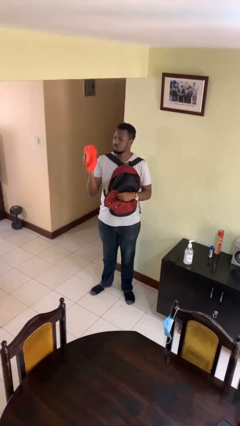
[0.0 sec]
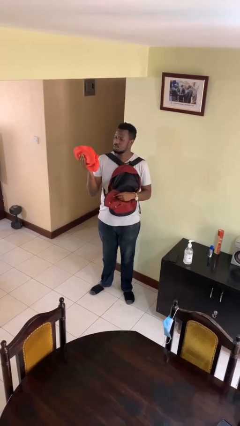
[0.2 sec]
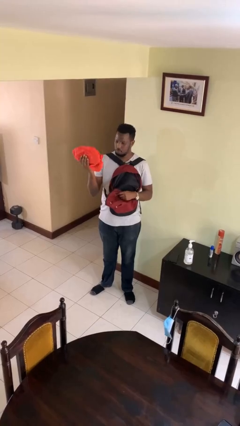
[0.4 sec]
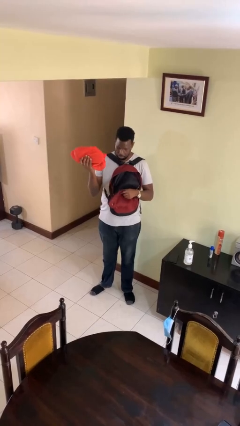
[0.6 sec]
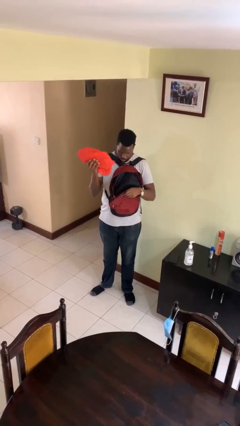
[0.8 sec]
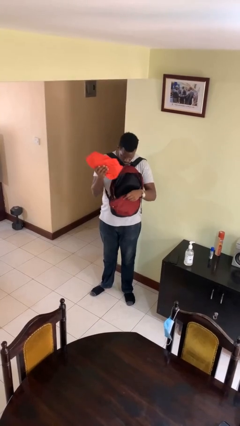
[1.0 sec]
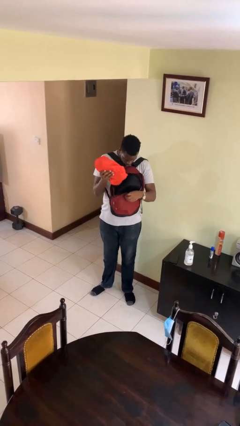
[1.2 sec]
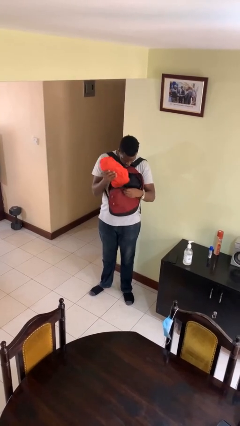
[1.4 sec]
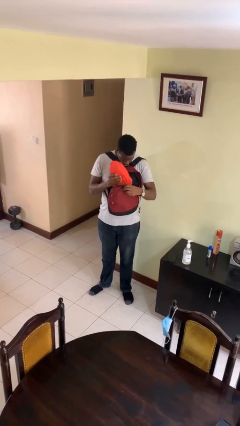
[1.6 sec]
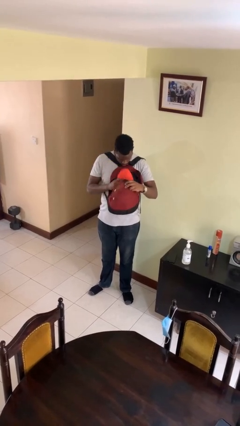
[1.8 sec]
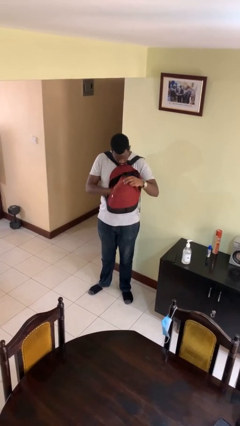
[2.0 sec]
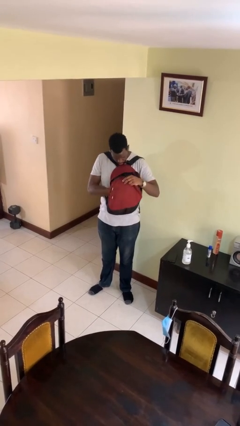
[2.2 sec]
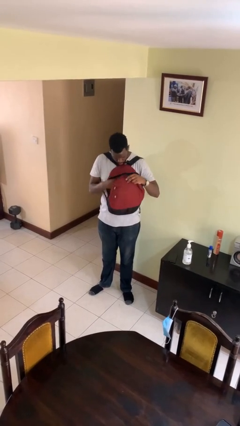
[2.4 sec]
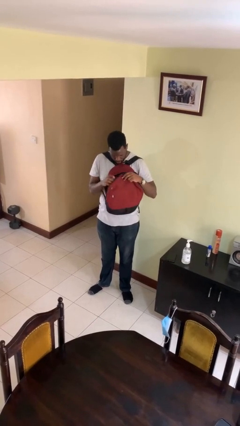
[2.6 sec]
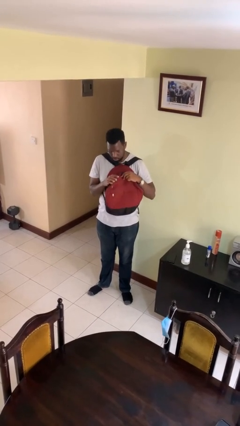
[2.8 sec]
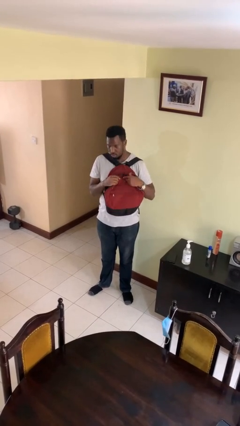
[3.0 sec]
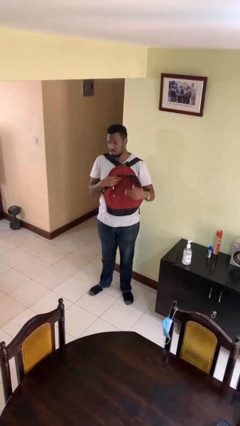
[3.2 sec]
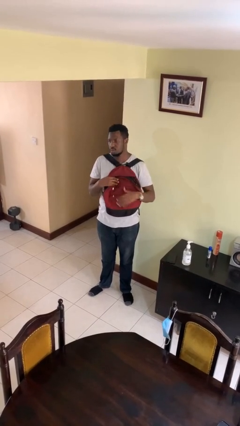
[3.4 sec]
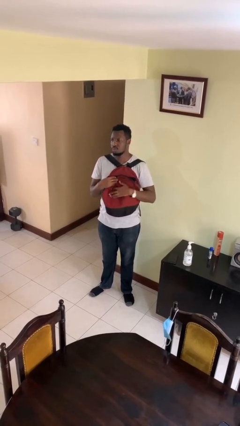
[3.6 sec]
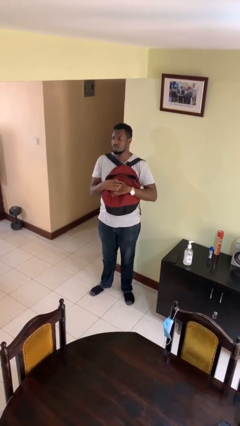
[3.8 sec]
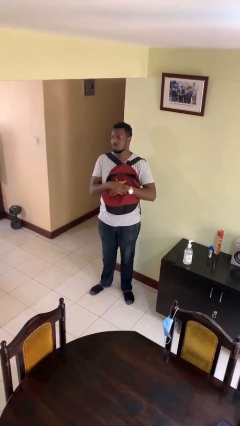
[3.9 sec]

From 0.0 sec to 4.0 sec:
person puts object into backpack

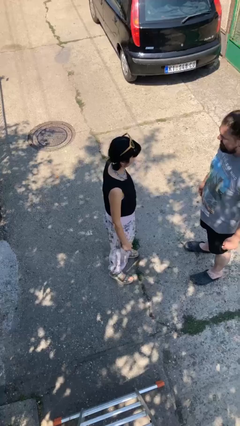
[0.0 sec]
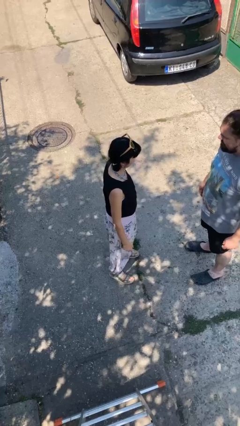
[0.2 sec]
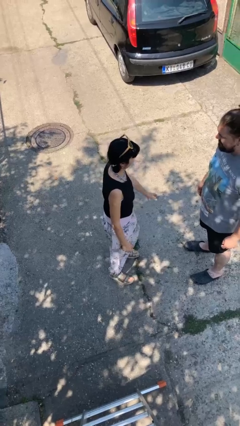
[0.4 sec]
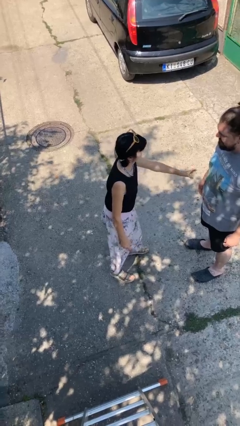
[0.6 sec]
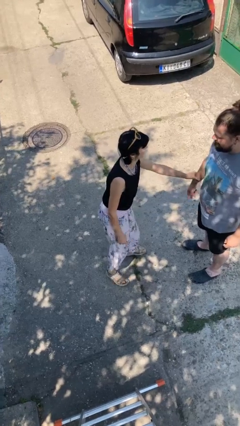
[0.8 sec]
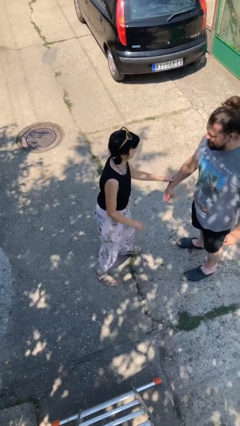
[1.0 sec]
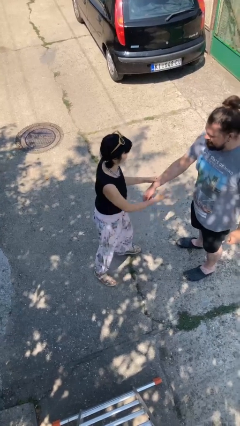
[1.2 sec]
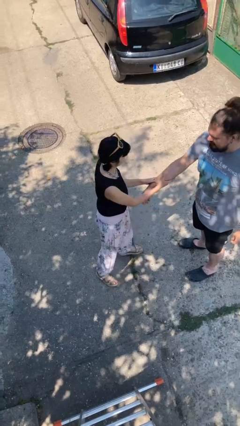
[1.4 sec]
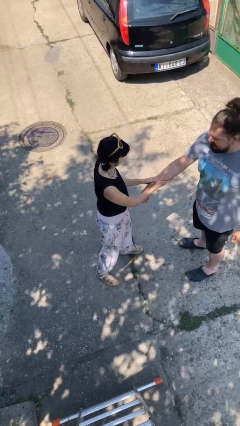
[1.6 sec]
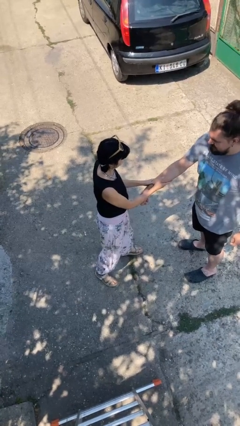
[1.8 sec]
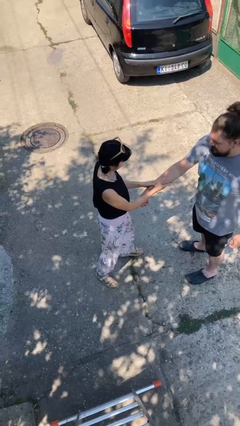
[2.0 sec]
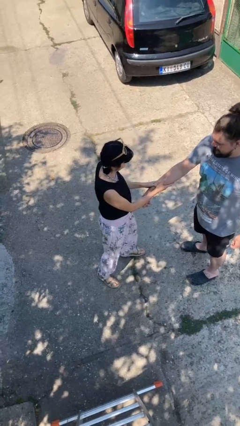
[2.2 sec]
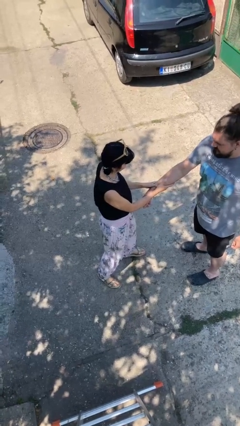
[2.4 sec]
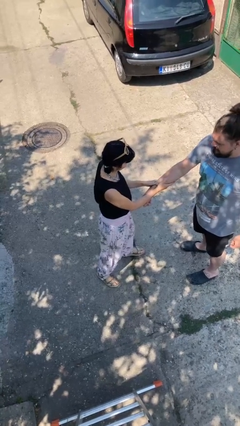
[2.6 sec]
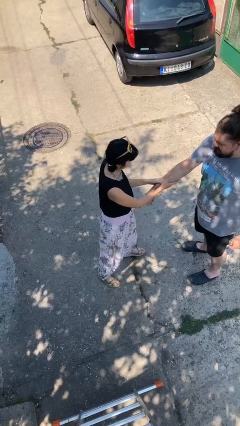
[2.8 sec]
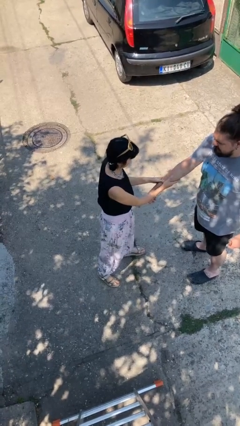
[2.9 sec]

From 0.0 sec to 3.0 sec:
person grabs person by forearm

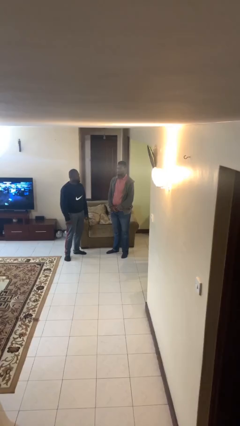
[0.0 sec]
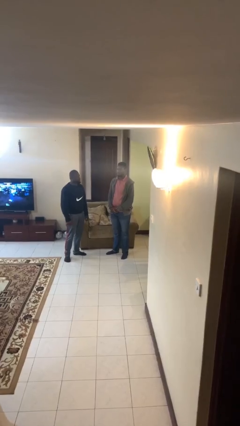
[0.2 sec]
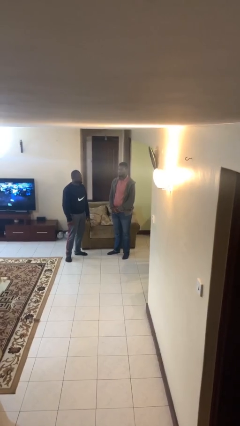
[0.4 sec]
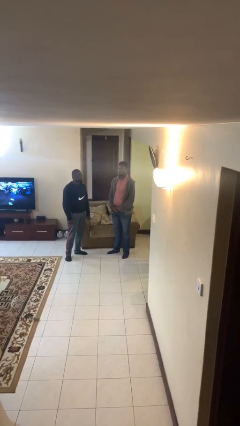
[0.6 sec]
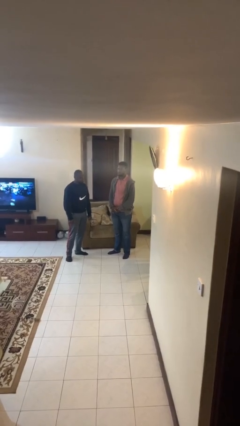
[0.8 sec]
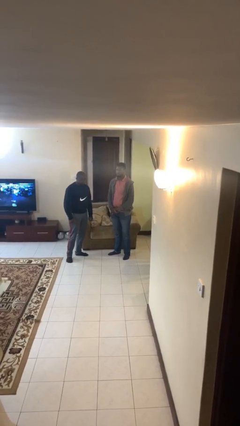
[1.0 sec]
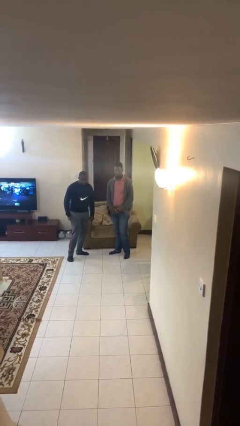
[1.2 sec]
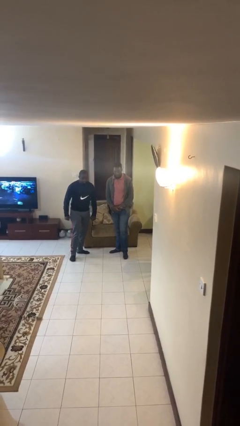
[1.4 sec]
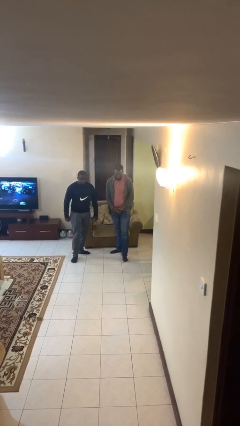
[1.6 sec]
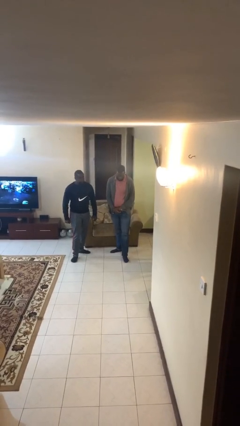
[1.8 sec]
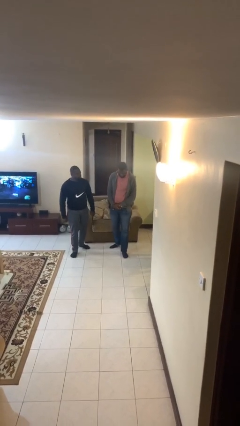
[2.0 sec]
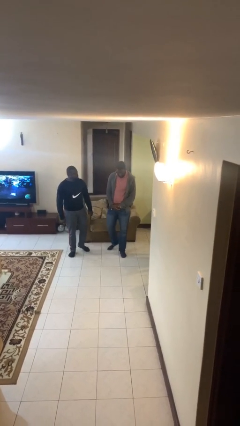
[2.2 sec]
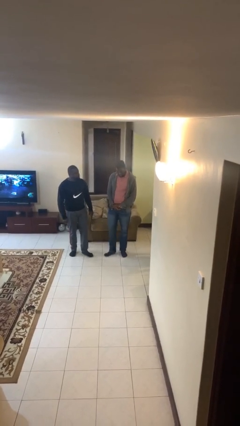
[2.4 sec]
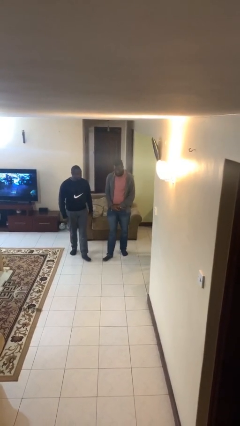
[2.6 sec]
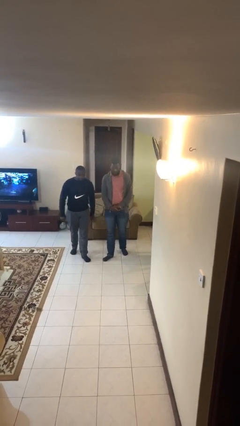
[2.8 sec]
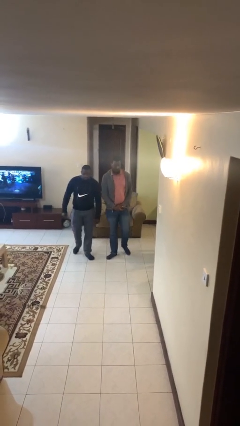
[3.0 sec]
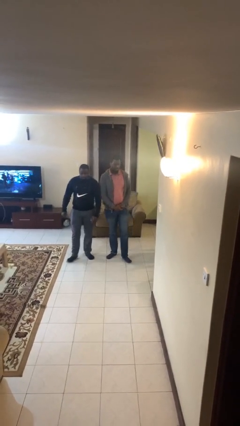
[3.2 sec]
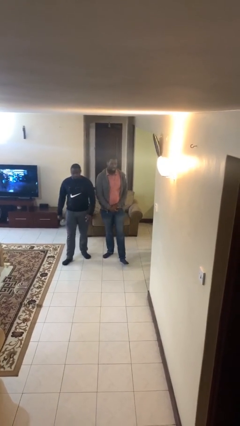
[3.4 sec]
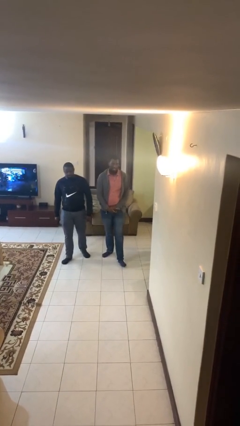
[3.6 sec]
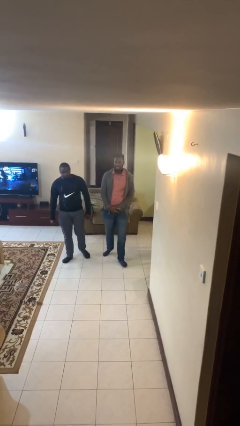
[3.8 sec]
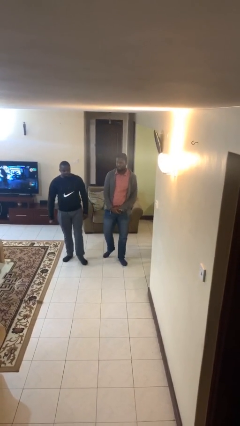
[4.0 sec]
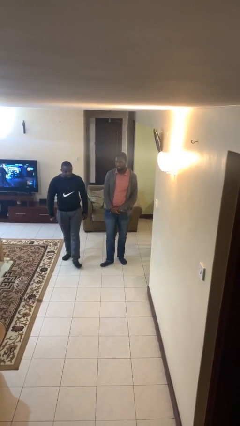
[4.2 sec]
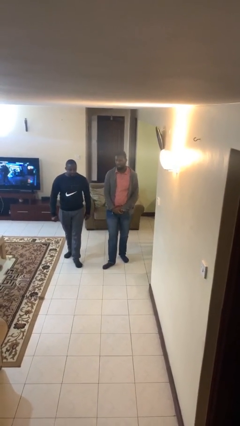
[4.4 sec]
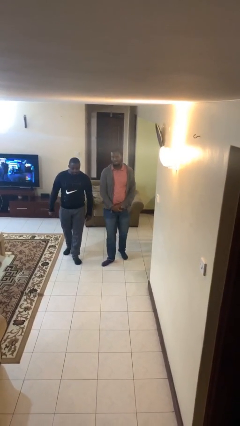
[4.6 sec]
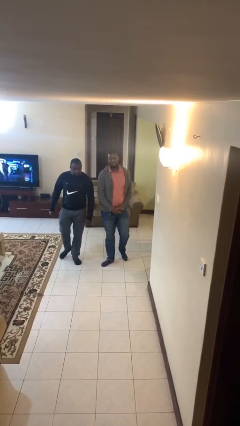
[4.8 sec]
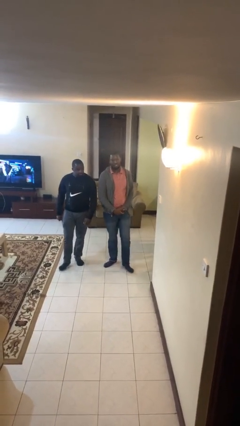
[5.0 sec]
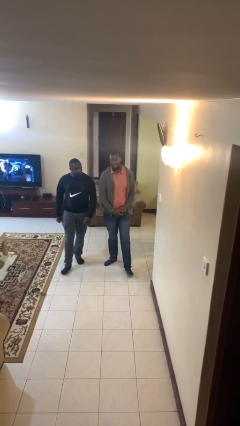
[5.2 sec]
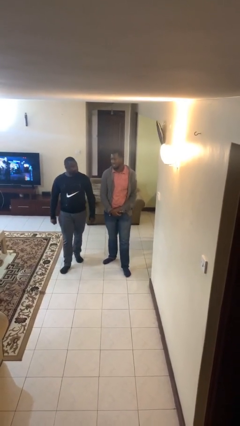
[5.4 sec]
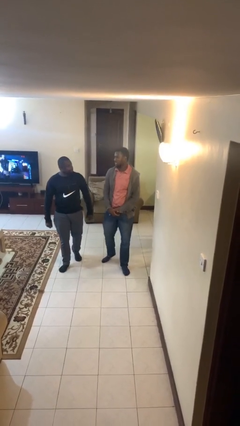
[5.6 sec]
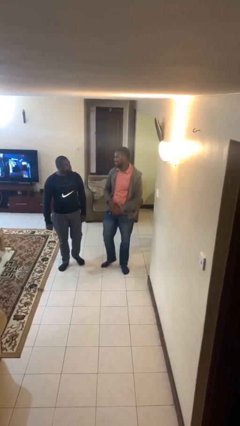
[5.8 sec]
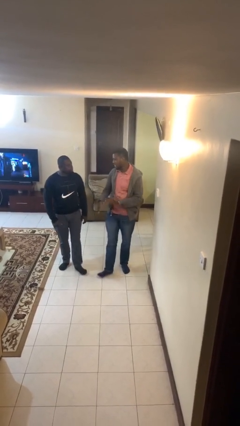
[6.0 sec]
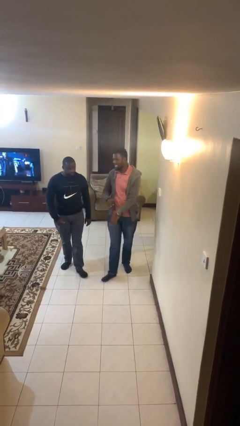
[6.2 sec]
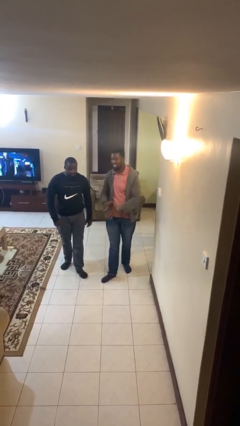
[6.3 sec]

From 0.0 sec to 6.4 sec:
person talks to person

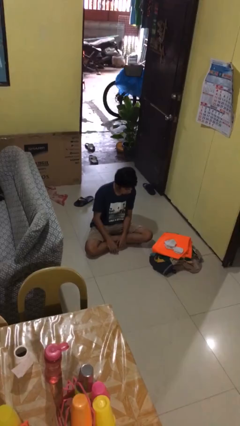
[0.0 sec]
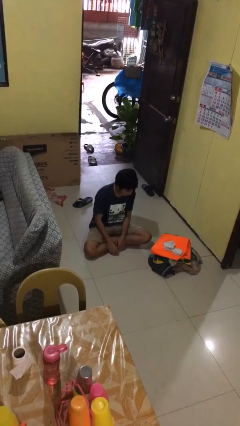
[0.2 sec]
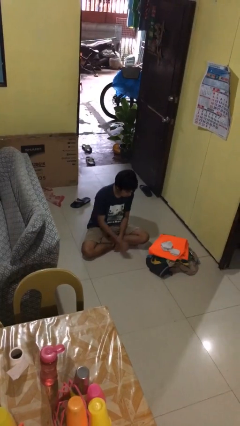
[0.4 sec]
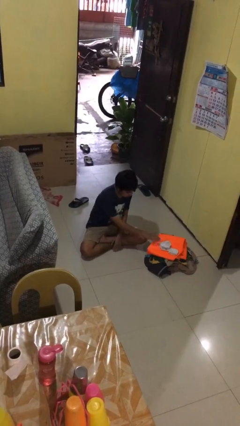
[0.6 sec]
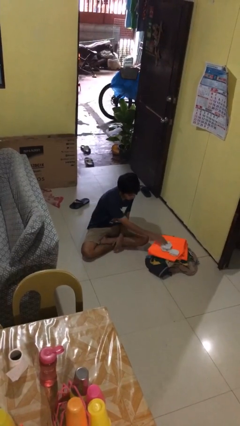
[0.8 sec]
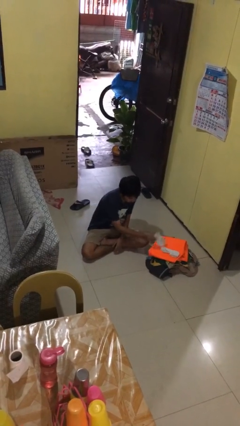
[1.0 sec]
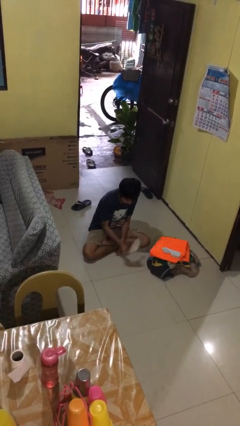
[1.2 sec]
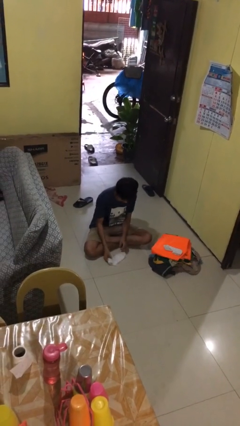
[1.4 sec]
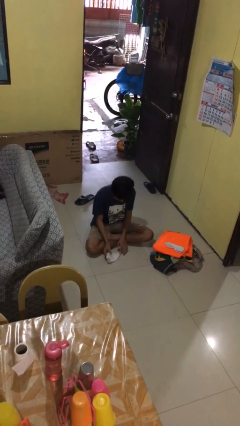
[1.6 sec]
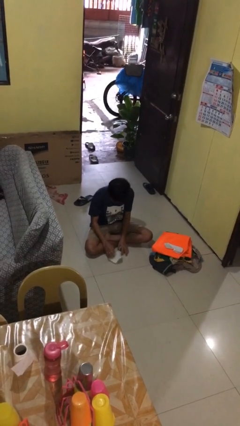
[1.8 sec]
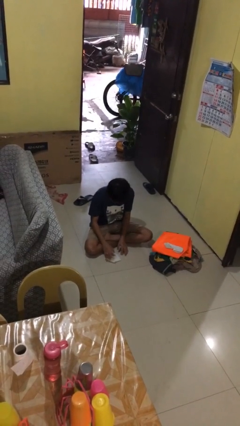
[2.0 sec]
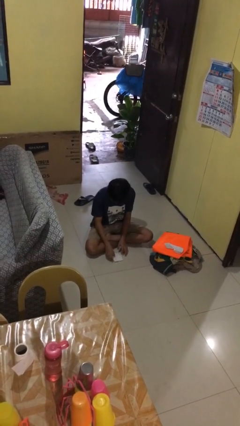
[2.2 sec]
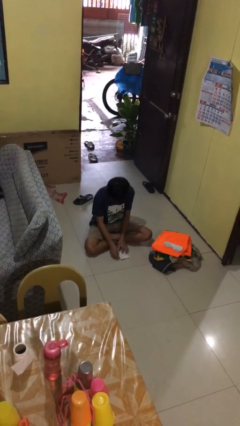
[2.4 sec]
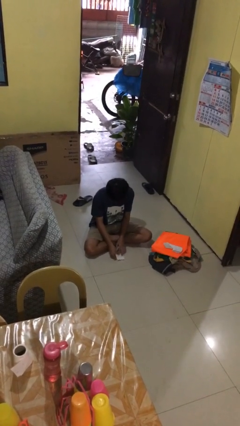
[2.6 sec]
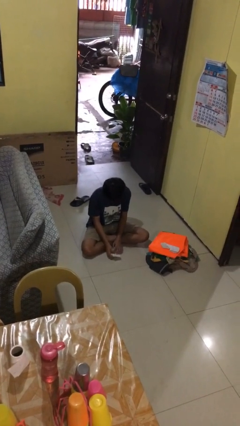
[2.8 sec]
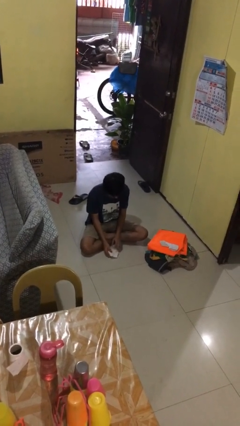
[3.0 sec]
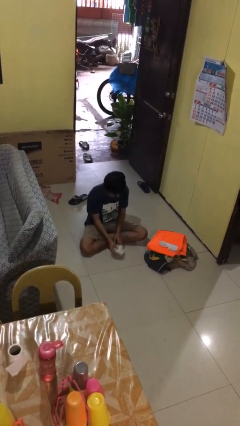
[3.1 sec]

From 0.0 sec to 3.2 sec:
person folds socks

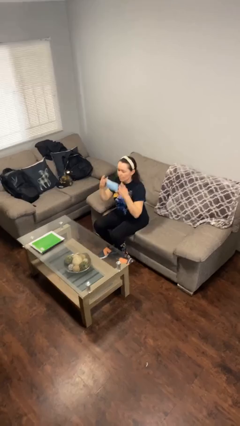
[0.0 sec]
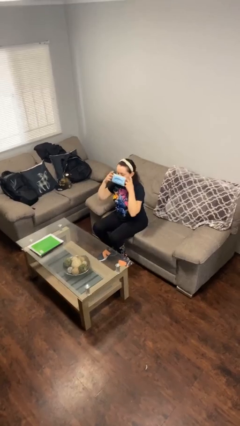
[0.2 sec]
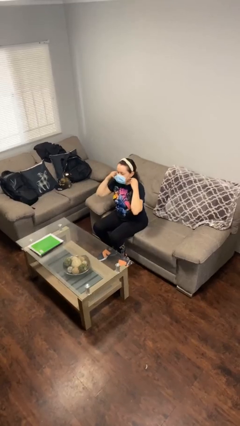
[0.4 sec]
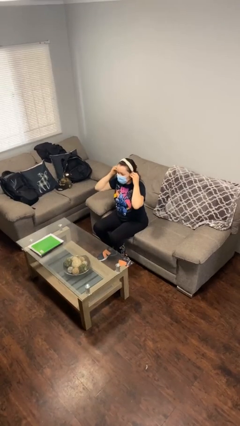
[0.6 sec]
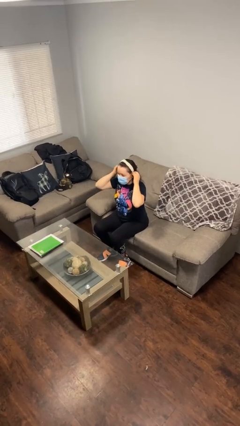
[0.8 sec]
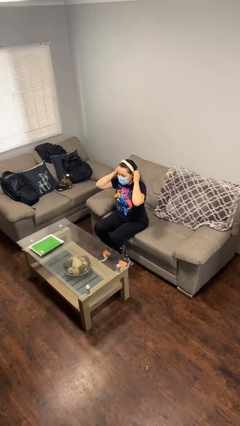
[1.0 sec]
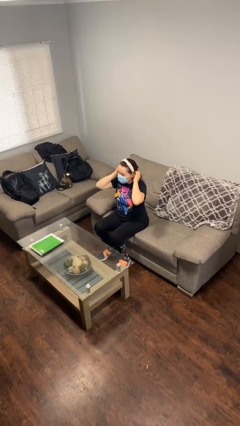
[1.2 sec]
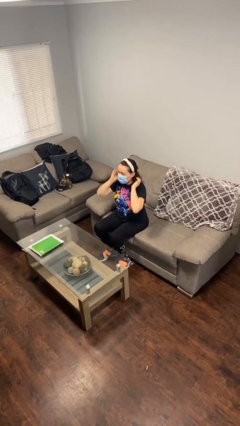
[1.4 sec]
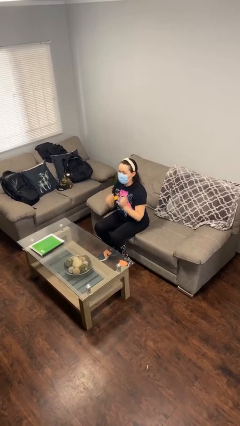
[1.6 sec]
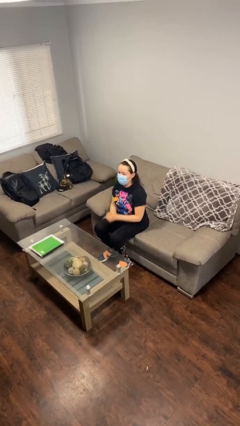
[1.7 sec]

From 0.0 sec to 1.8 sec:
person puts on facemask
